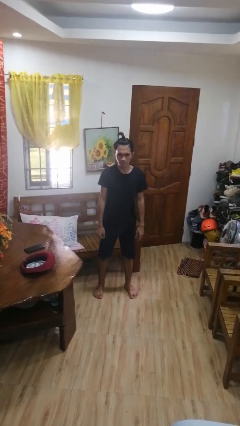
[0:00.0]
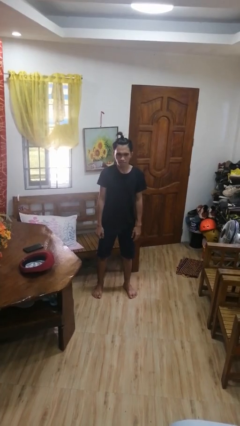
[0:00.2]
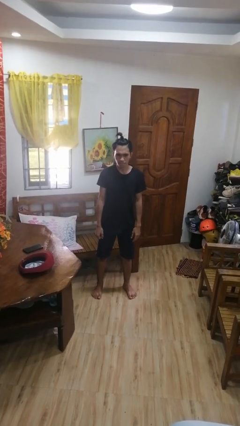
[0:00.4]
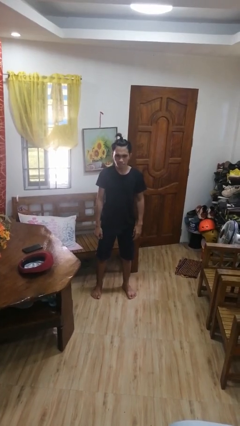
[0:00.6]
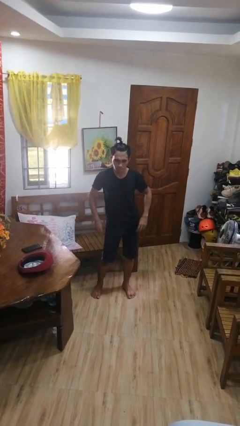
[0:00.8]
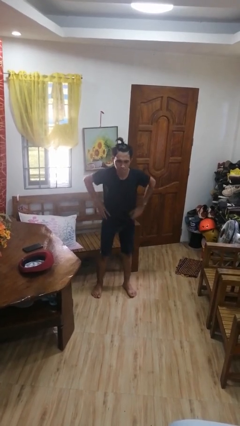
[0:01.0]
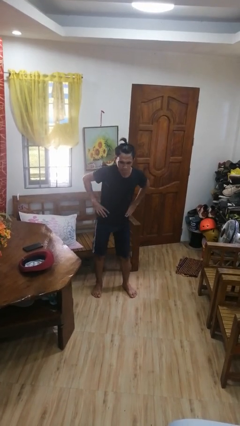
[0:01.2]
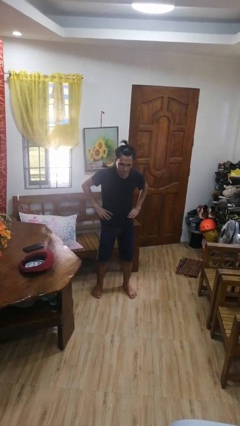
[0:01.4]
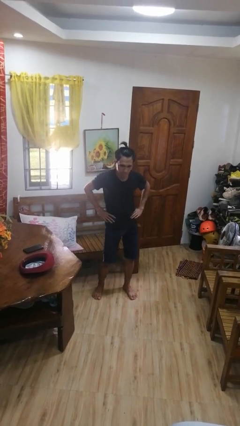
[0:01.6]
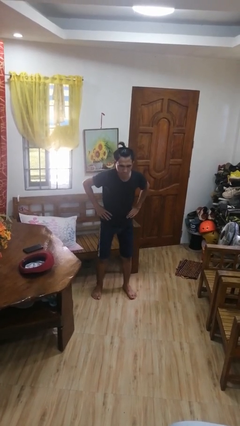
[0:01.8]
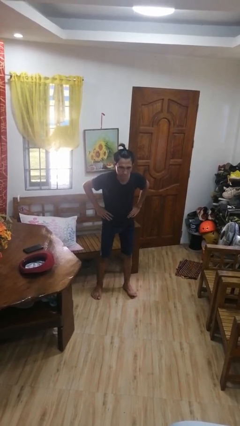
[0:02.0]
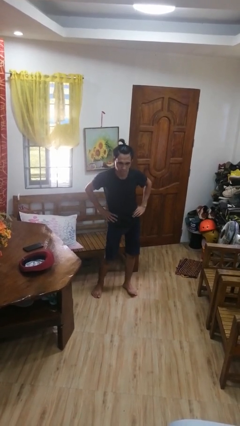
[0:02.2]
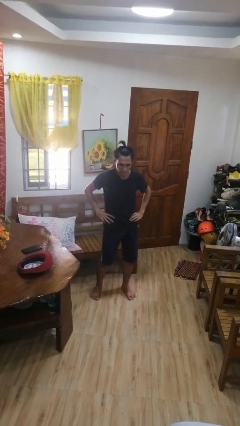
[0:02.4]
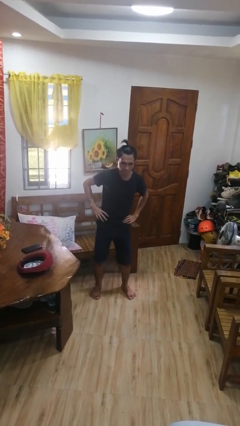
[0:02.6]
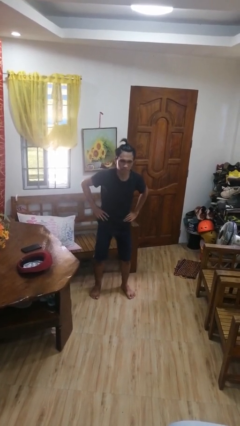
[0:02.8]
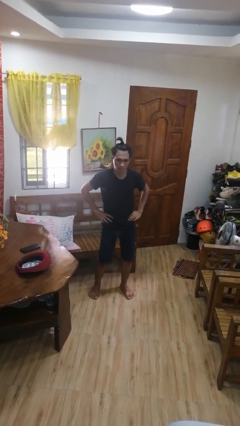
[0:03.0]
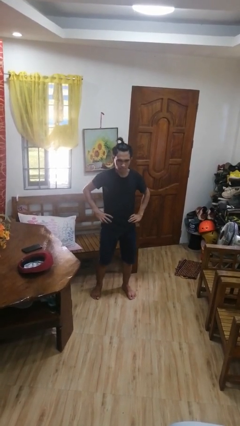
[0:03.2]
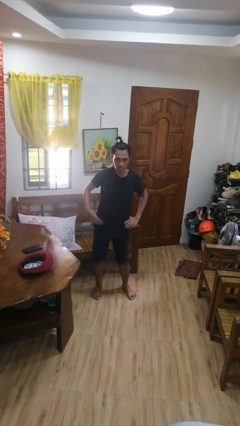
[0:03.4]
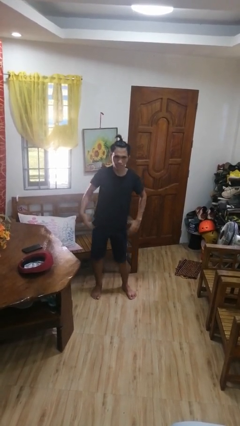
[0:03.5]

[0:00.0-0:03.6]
person wiggles hips

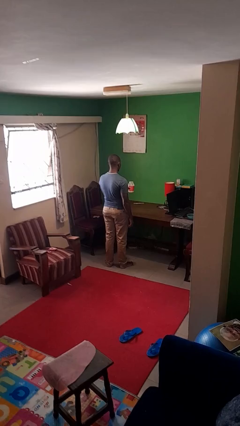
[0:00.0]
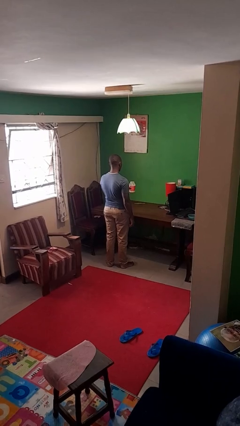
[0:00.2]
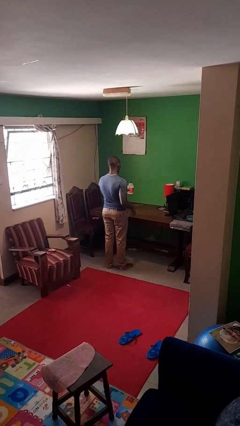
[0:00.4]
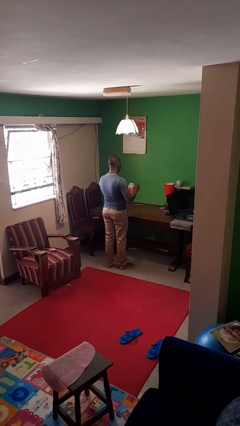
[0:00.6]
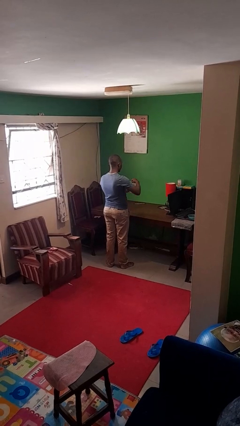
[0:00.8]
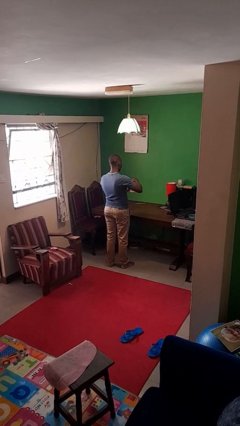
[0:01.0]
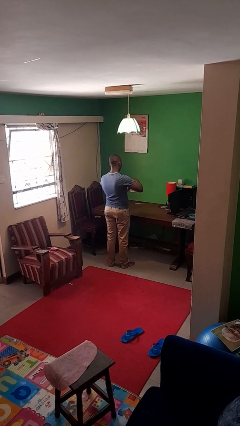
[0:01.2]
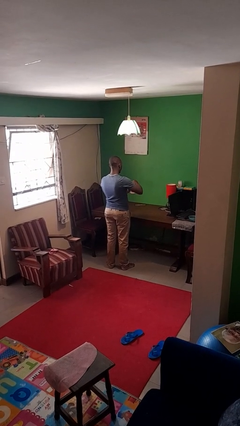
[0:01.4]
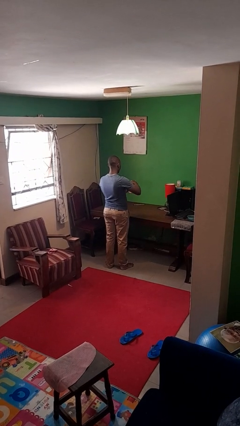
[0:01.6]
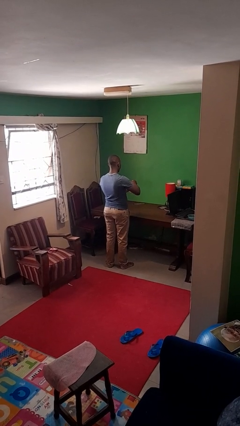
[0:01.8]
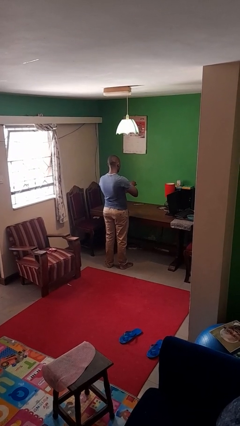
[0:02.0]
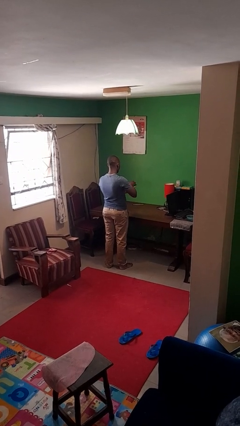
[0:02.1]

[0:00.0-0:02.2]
person closes jar

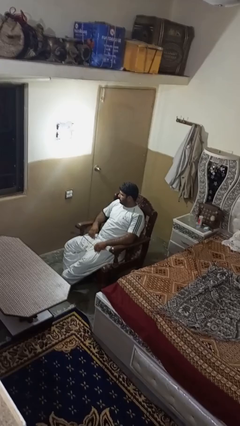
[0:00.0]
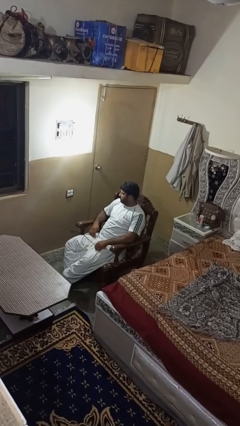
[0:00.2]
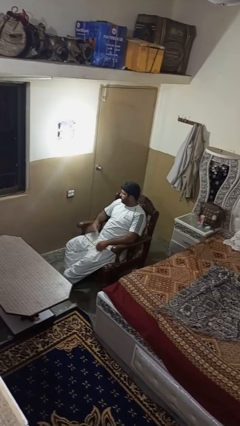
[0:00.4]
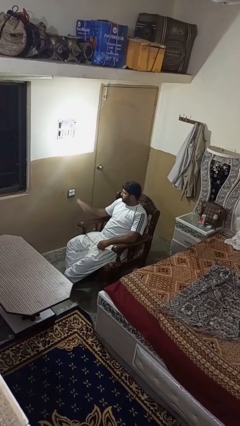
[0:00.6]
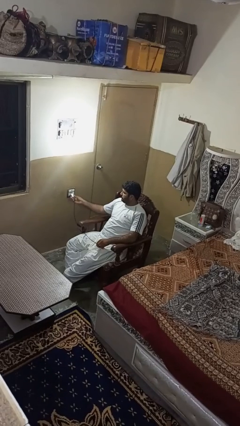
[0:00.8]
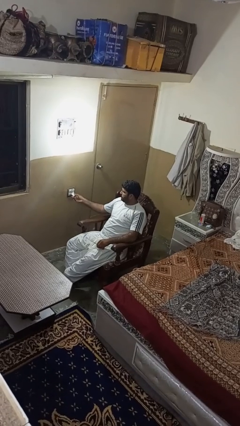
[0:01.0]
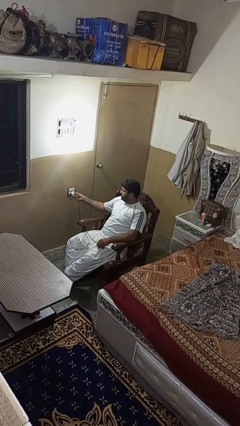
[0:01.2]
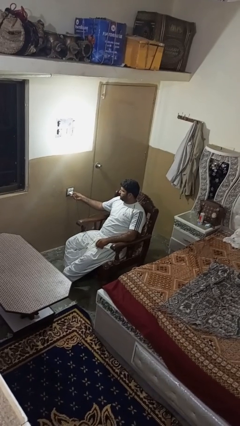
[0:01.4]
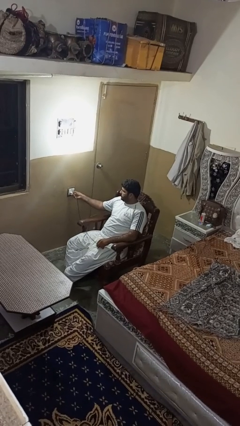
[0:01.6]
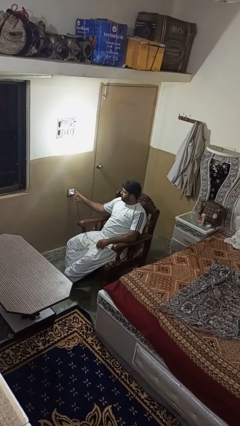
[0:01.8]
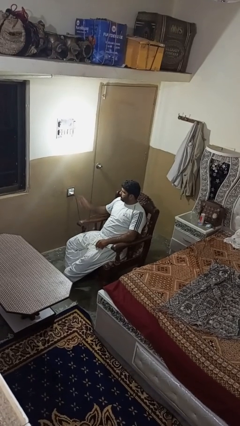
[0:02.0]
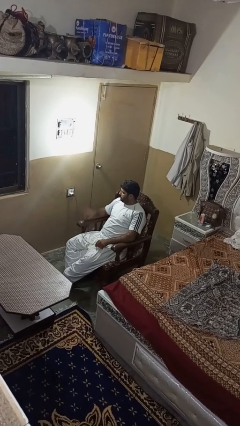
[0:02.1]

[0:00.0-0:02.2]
person plugs into electrical socket

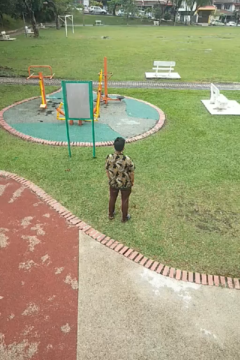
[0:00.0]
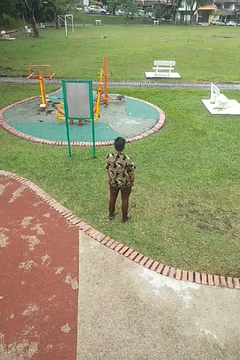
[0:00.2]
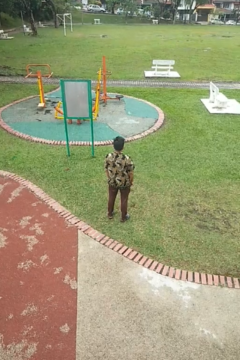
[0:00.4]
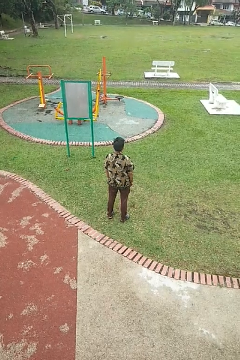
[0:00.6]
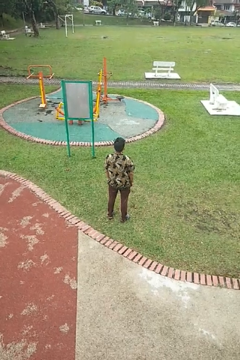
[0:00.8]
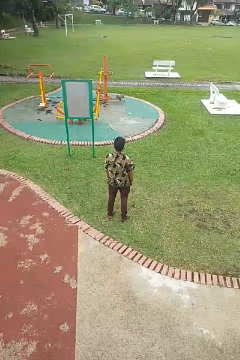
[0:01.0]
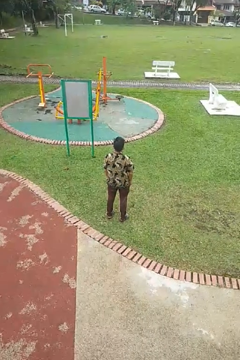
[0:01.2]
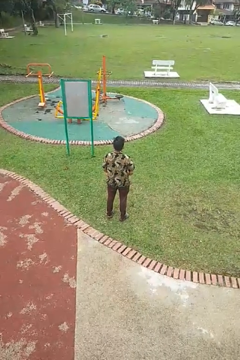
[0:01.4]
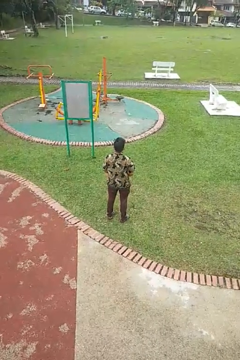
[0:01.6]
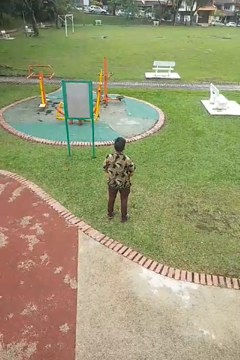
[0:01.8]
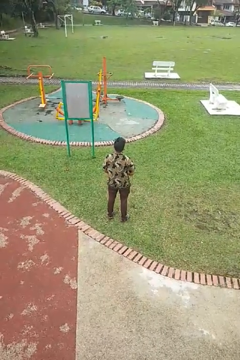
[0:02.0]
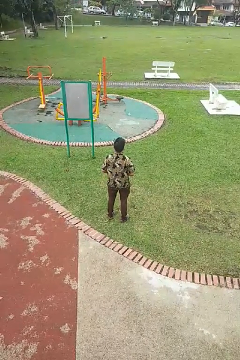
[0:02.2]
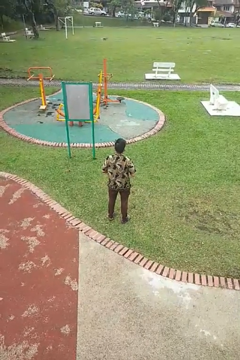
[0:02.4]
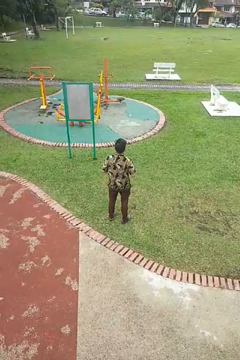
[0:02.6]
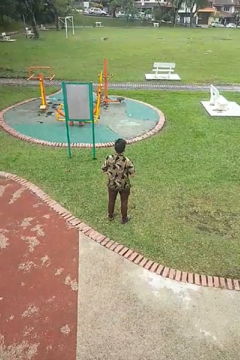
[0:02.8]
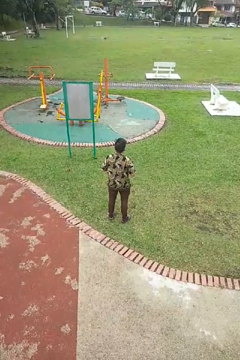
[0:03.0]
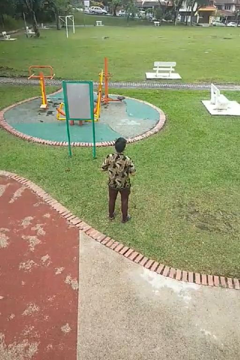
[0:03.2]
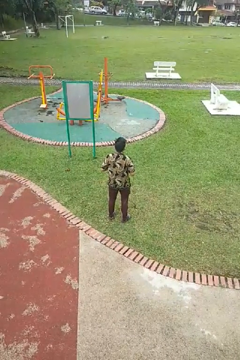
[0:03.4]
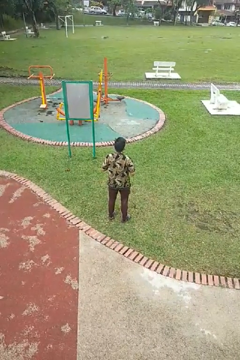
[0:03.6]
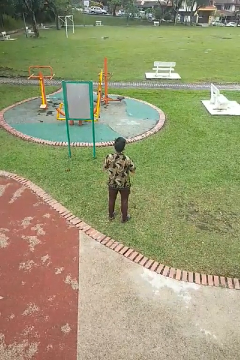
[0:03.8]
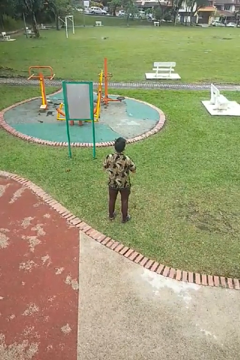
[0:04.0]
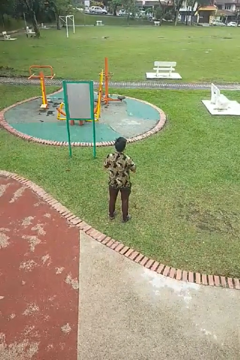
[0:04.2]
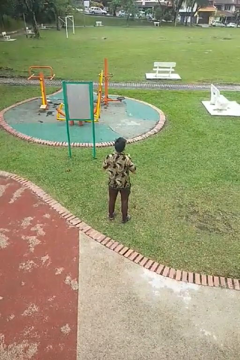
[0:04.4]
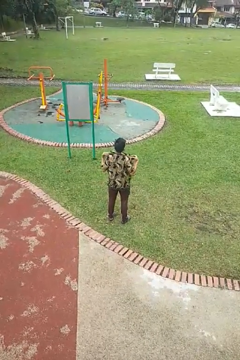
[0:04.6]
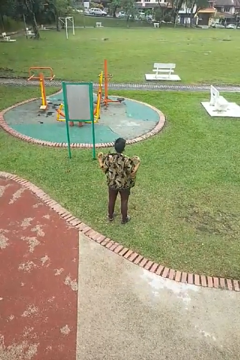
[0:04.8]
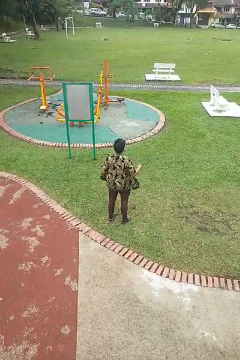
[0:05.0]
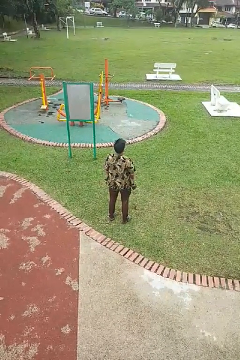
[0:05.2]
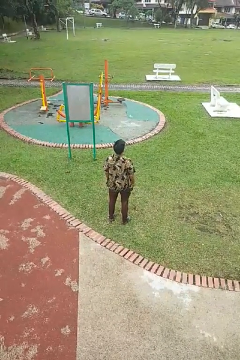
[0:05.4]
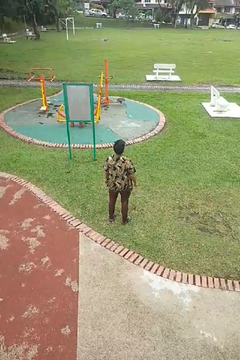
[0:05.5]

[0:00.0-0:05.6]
person unbuttons shirt

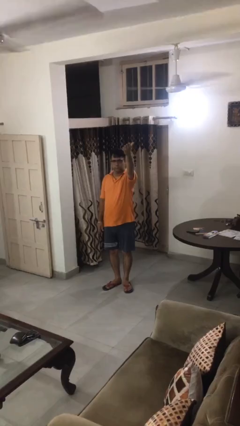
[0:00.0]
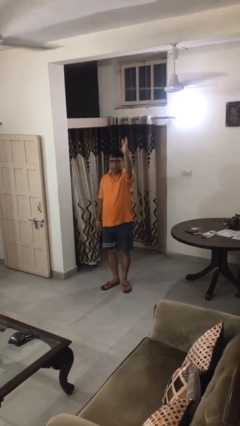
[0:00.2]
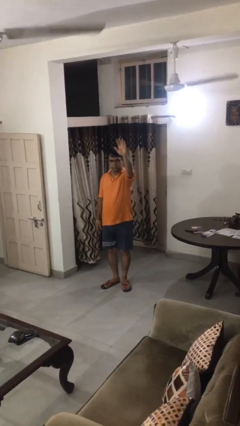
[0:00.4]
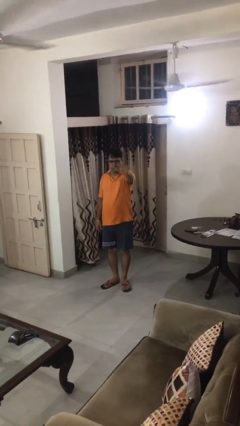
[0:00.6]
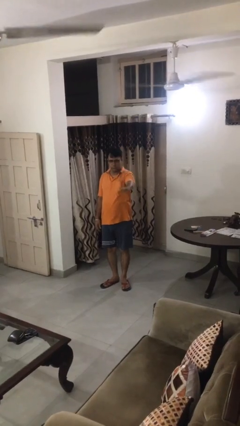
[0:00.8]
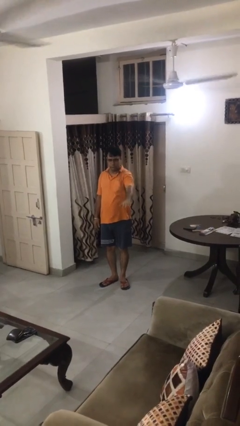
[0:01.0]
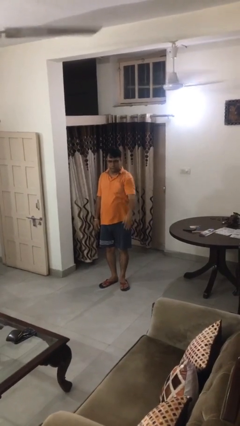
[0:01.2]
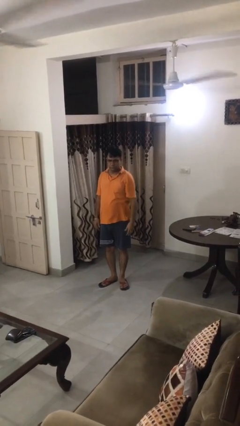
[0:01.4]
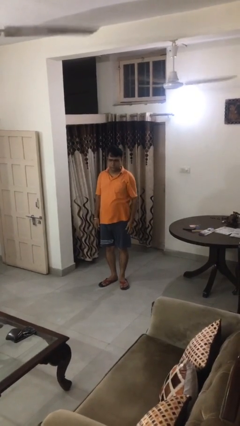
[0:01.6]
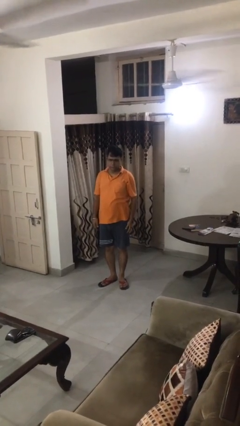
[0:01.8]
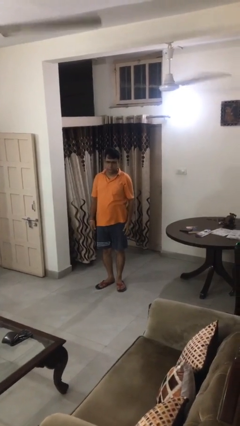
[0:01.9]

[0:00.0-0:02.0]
person gestures swipe down

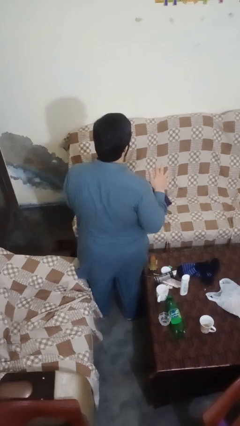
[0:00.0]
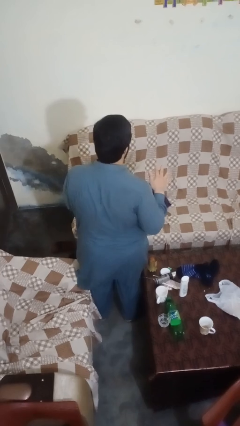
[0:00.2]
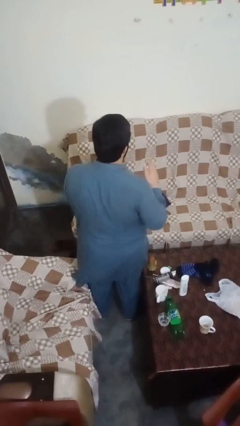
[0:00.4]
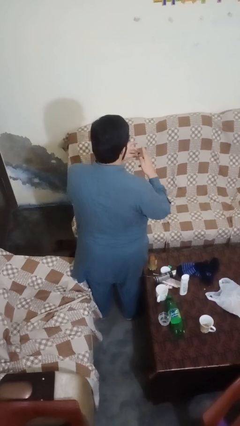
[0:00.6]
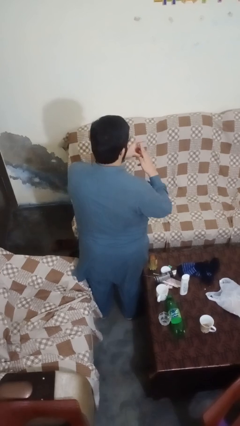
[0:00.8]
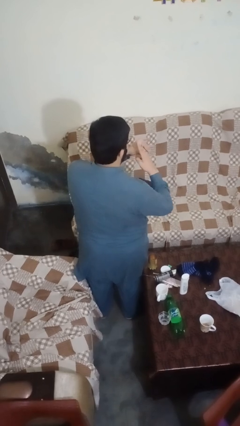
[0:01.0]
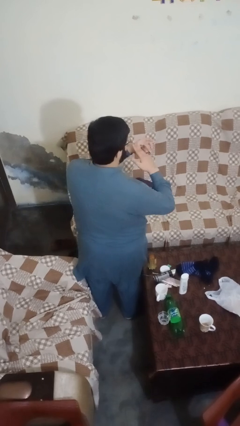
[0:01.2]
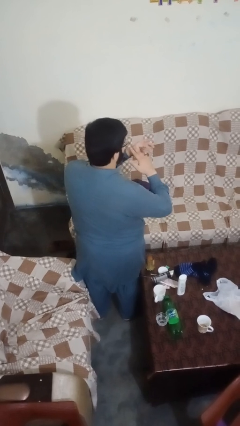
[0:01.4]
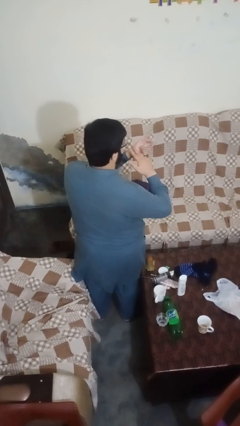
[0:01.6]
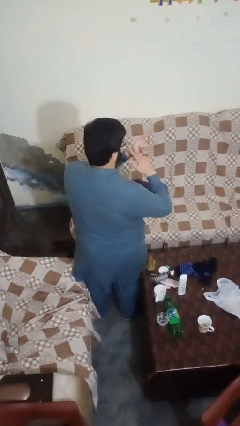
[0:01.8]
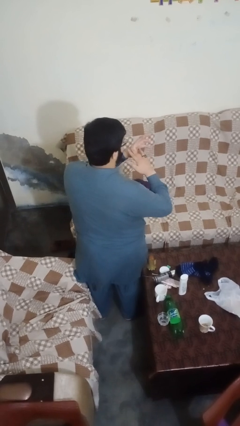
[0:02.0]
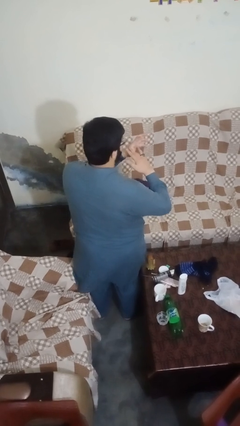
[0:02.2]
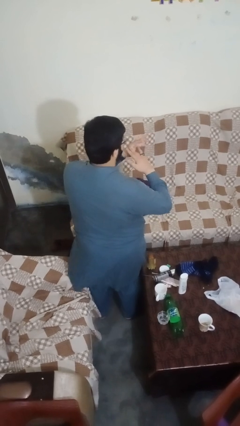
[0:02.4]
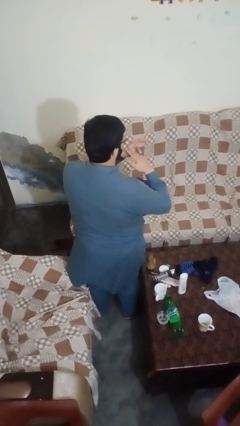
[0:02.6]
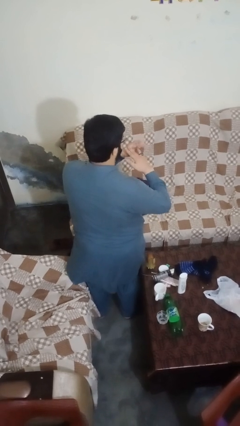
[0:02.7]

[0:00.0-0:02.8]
person puts on ring

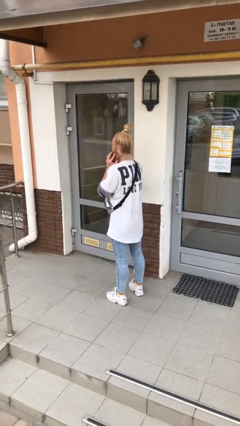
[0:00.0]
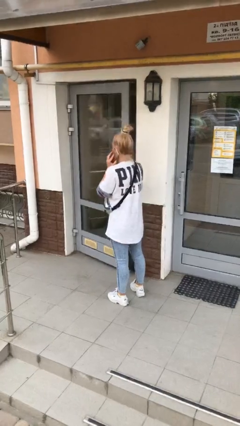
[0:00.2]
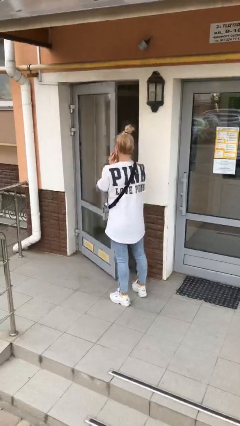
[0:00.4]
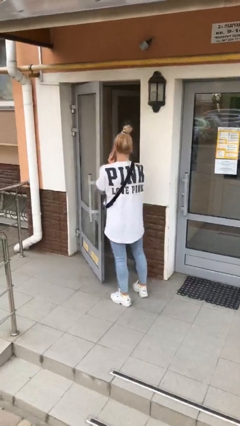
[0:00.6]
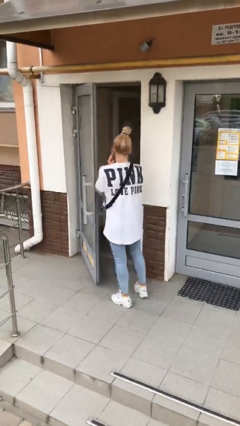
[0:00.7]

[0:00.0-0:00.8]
person opens facility door
